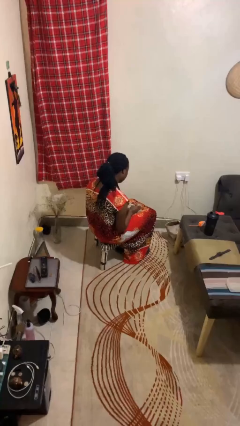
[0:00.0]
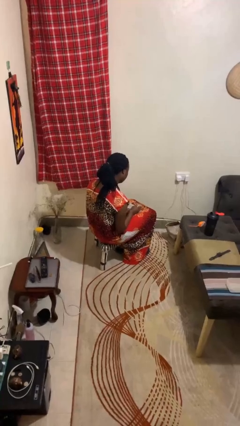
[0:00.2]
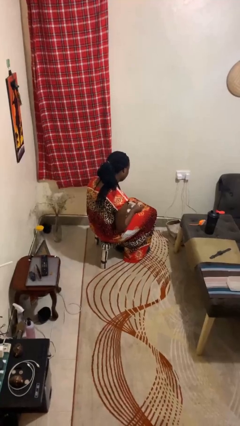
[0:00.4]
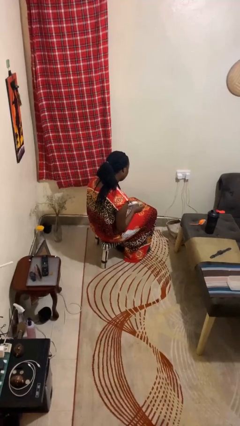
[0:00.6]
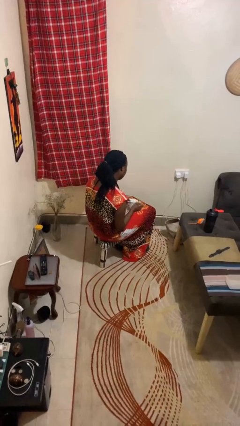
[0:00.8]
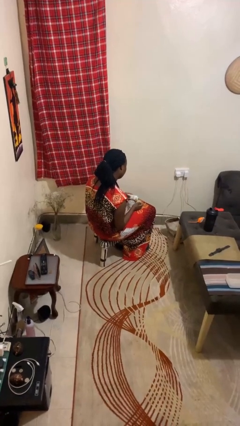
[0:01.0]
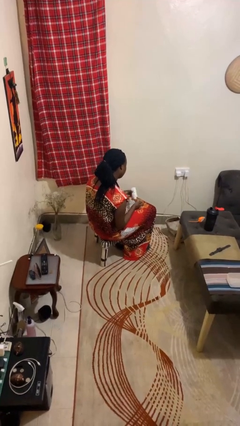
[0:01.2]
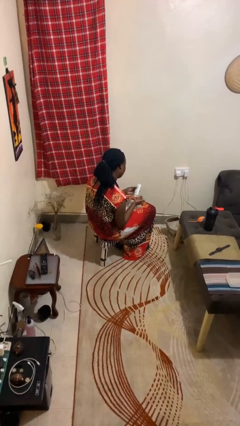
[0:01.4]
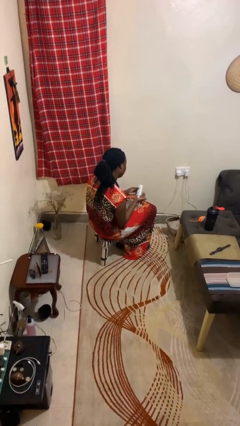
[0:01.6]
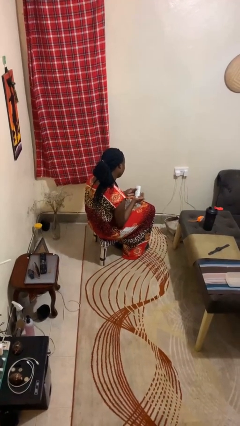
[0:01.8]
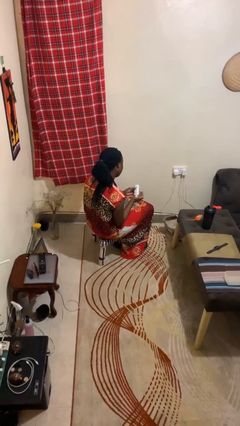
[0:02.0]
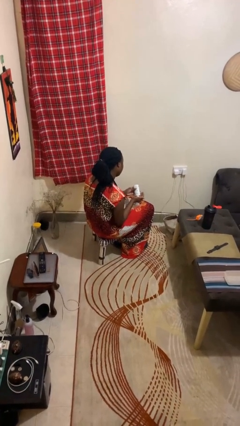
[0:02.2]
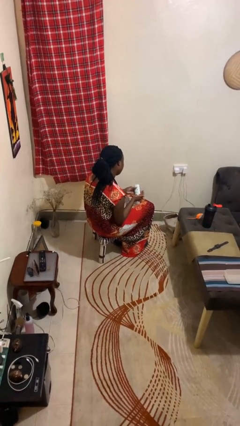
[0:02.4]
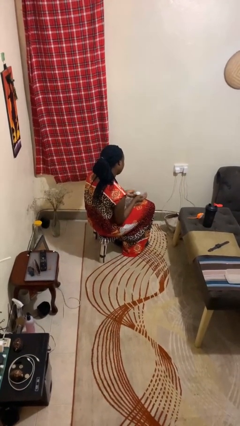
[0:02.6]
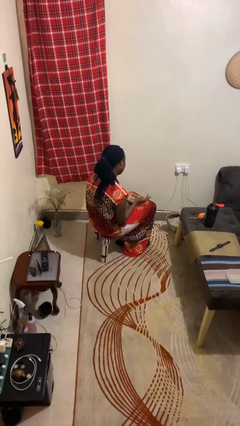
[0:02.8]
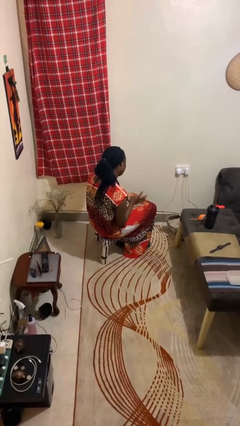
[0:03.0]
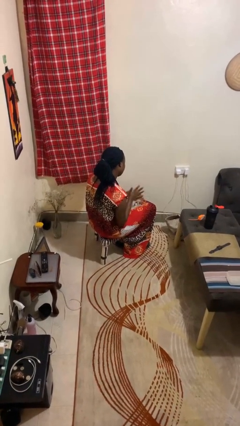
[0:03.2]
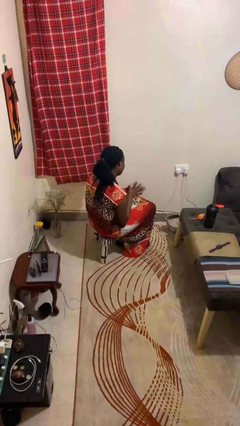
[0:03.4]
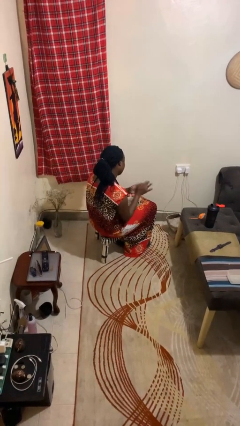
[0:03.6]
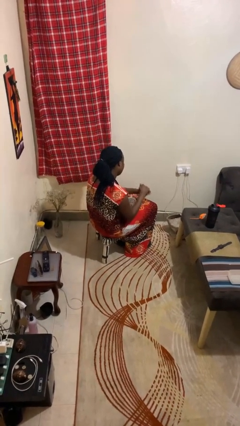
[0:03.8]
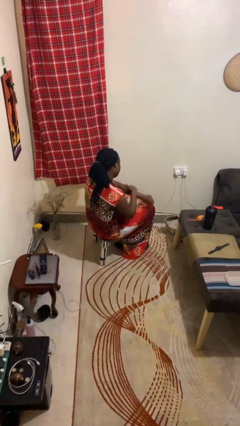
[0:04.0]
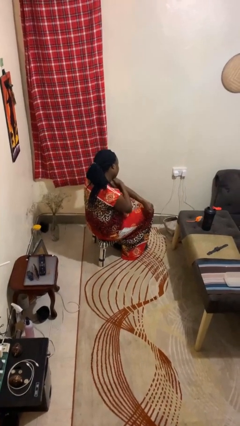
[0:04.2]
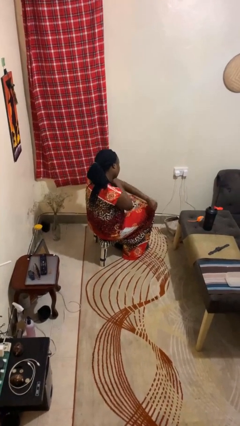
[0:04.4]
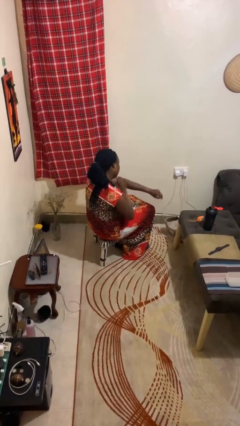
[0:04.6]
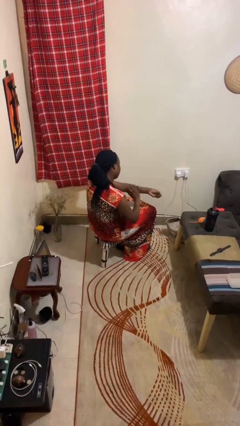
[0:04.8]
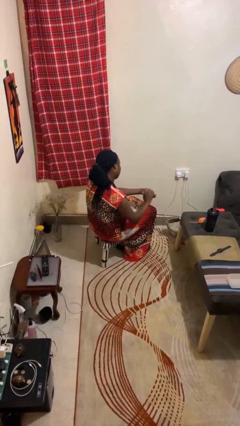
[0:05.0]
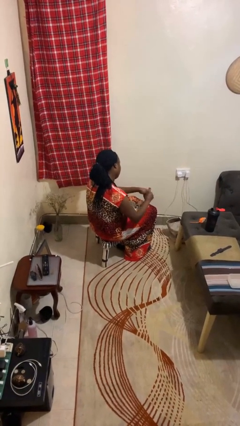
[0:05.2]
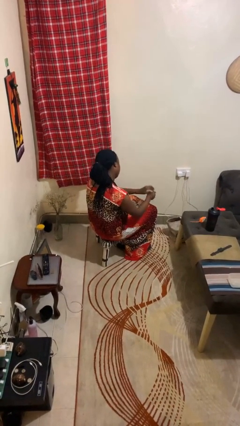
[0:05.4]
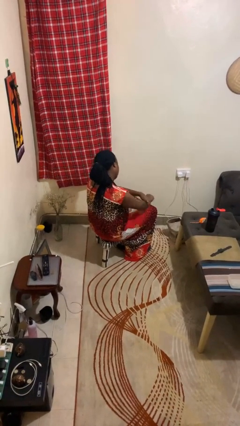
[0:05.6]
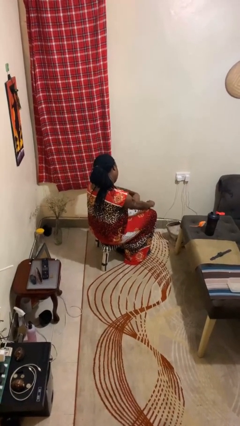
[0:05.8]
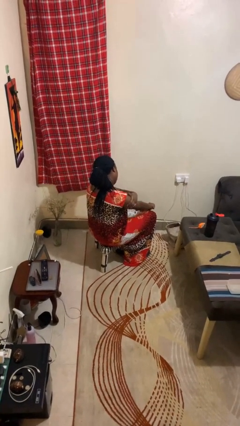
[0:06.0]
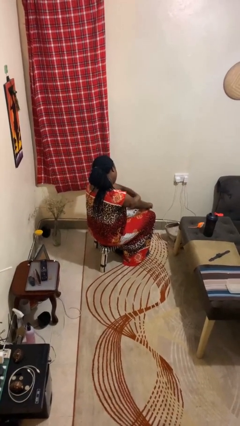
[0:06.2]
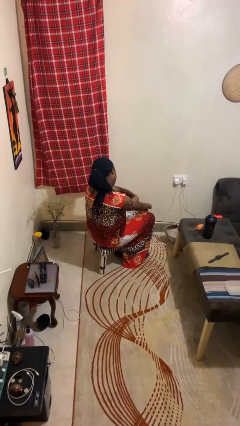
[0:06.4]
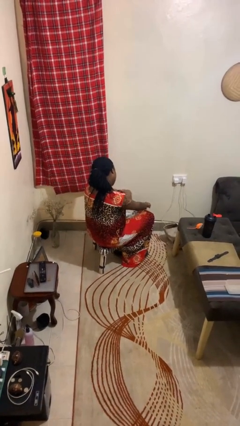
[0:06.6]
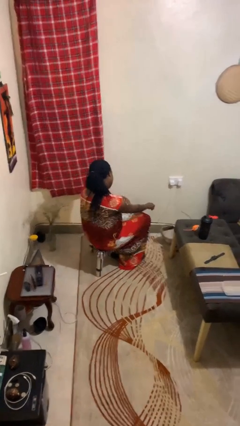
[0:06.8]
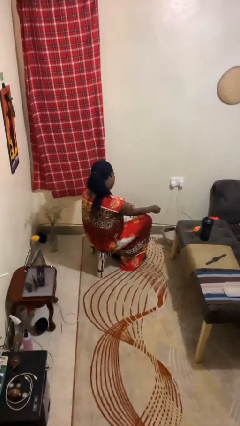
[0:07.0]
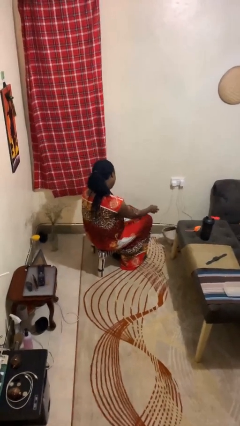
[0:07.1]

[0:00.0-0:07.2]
person applies sunscreen

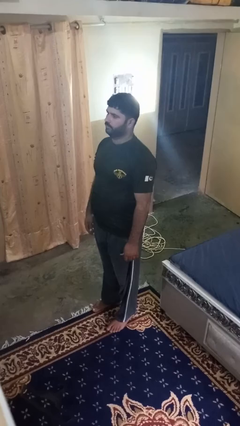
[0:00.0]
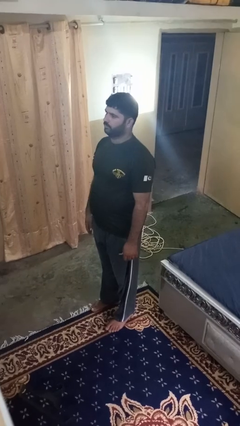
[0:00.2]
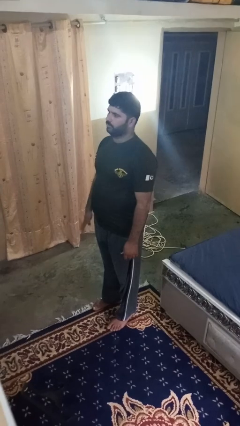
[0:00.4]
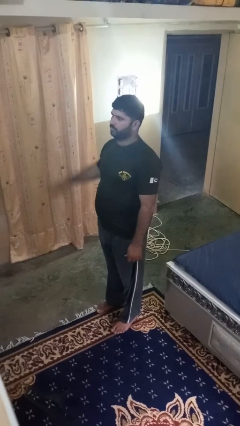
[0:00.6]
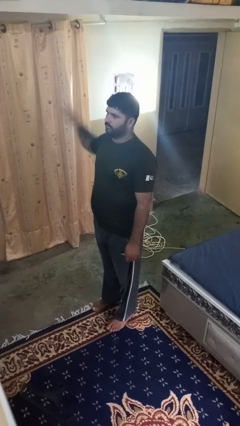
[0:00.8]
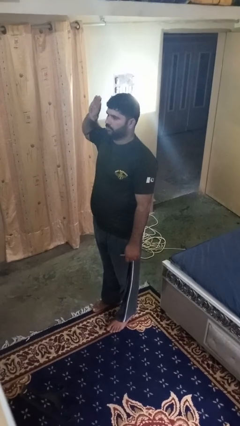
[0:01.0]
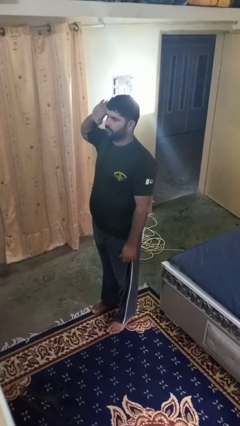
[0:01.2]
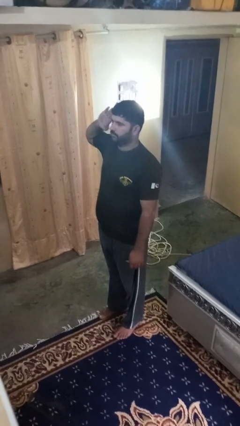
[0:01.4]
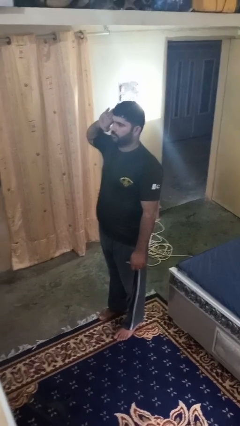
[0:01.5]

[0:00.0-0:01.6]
person salutes

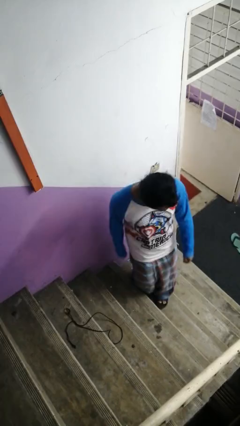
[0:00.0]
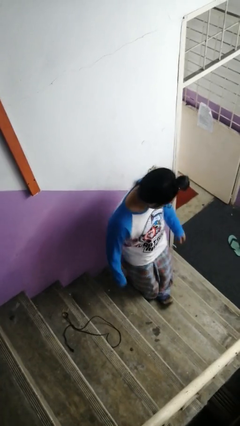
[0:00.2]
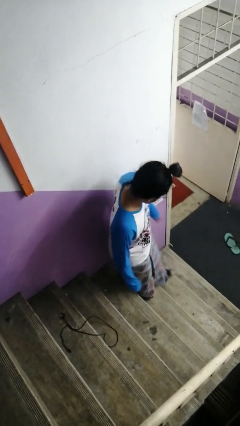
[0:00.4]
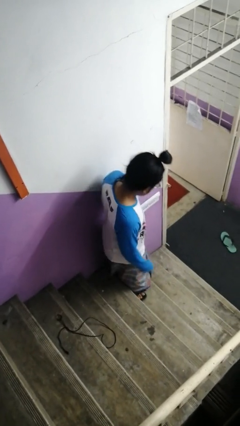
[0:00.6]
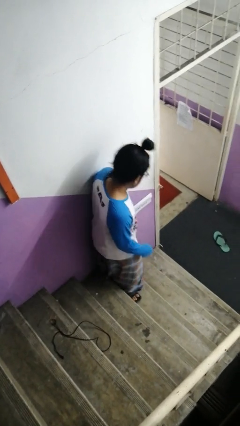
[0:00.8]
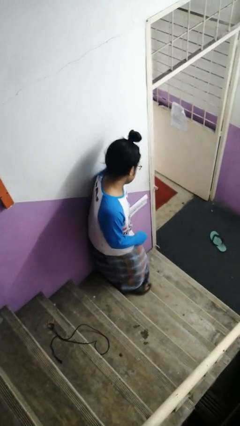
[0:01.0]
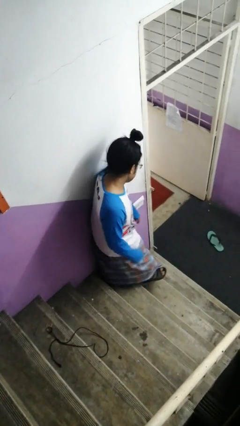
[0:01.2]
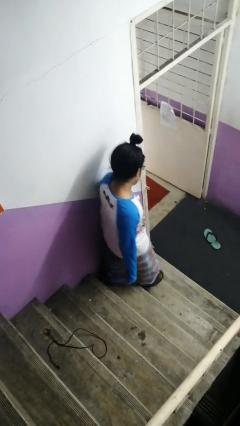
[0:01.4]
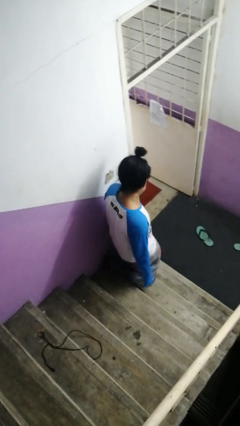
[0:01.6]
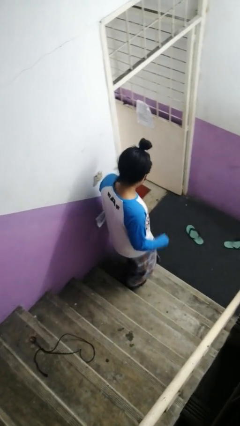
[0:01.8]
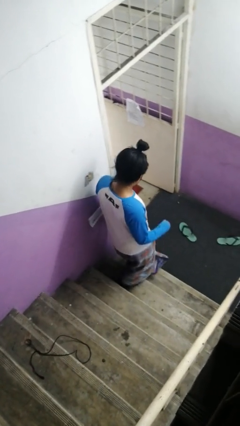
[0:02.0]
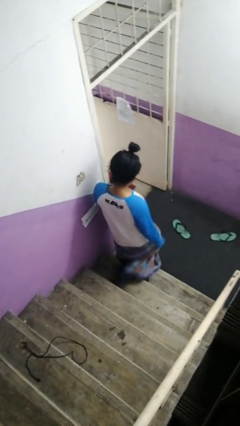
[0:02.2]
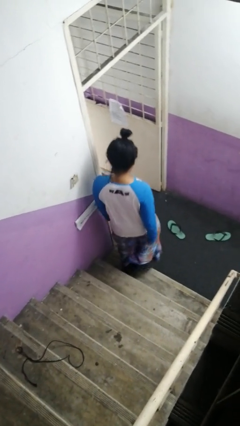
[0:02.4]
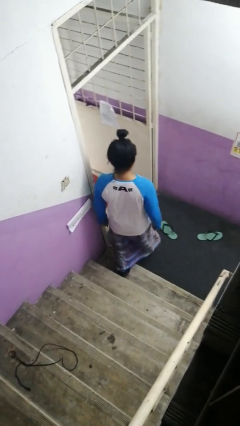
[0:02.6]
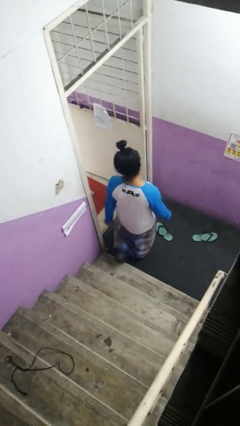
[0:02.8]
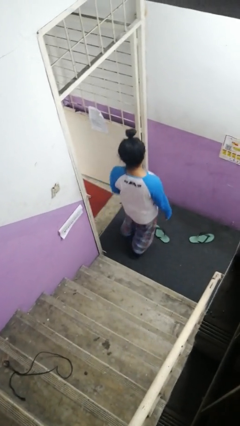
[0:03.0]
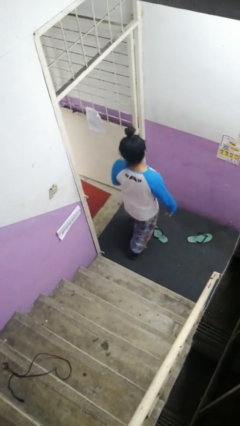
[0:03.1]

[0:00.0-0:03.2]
person climbs down stairs

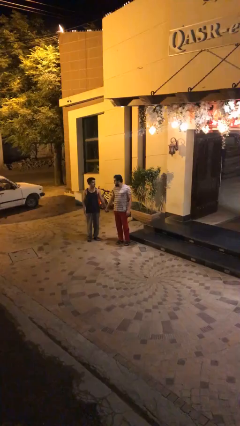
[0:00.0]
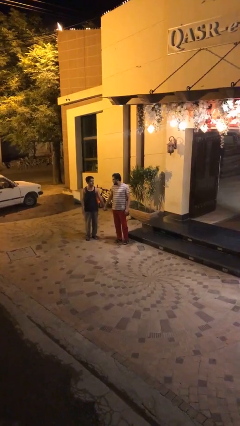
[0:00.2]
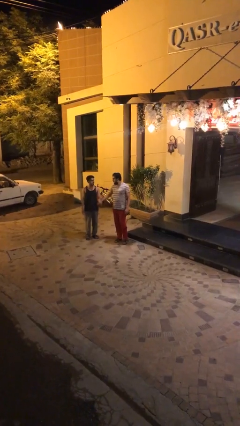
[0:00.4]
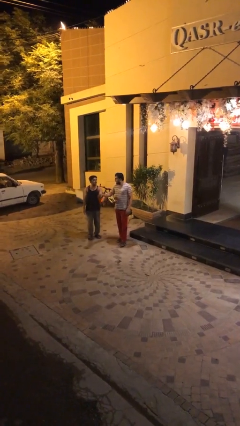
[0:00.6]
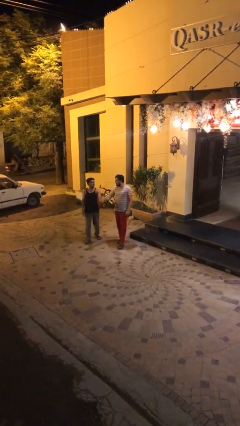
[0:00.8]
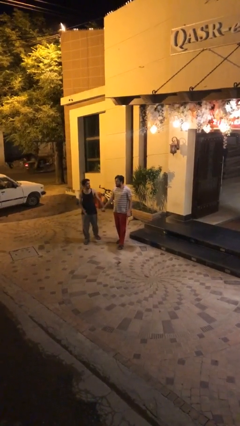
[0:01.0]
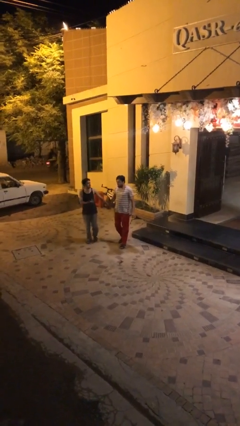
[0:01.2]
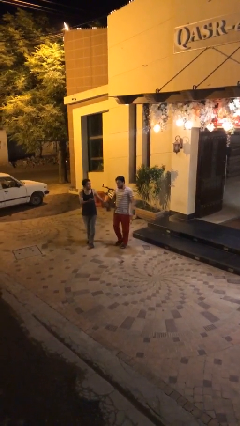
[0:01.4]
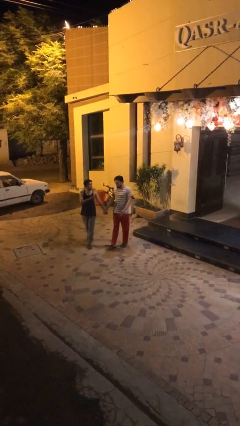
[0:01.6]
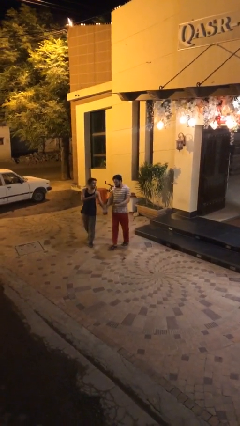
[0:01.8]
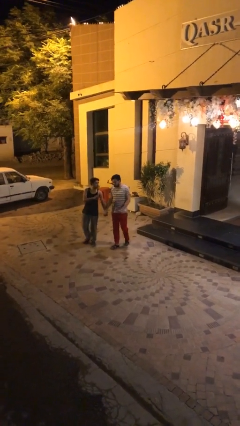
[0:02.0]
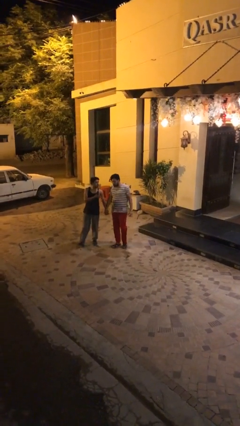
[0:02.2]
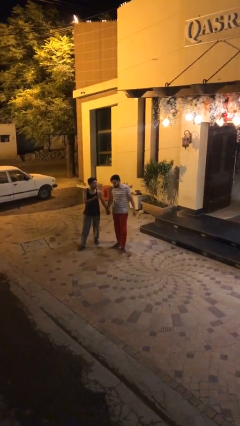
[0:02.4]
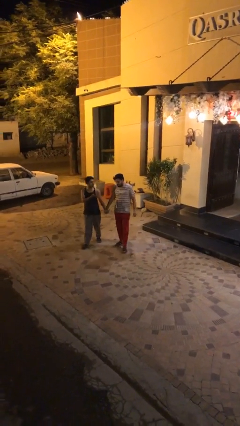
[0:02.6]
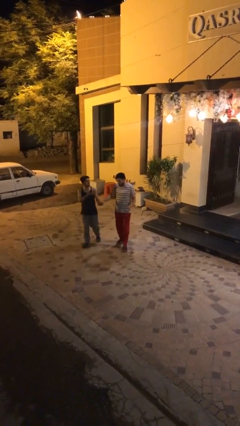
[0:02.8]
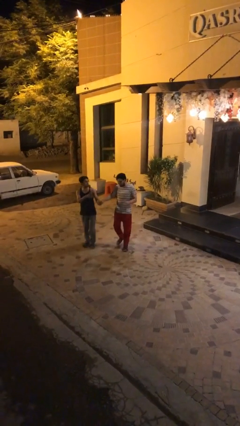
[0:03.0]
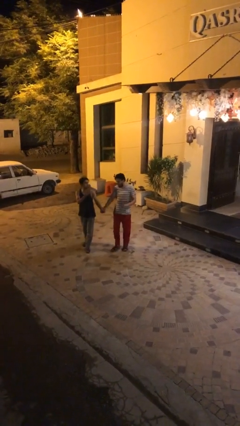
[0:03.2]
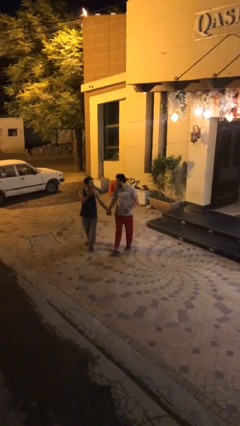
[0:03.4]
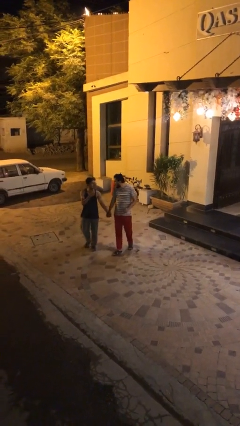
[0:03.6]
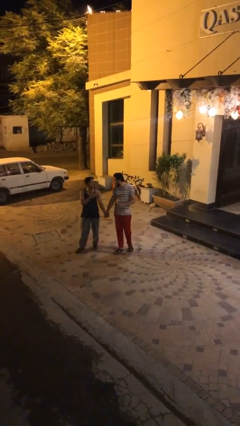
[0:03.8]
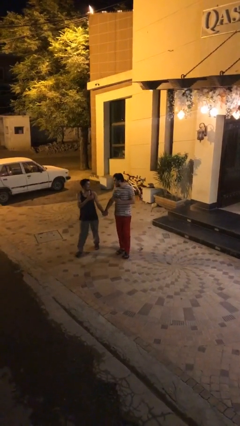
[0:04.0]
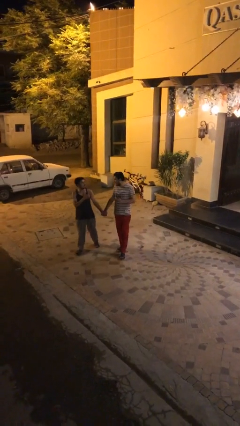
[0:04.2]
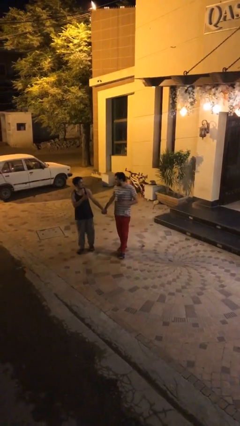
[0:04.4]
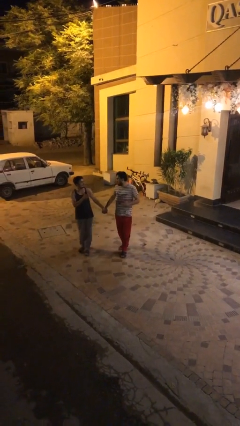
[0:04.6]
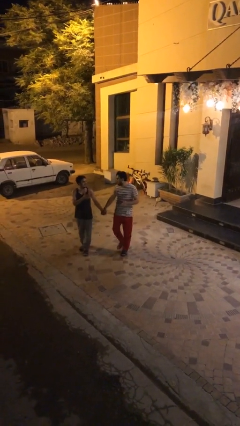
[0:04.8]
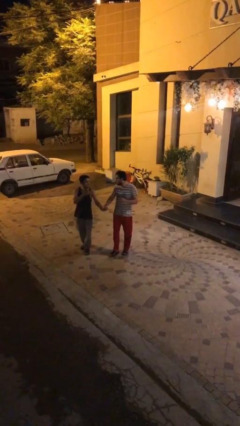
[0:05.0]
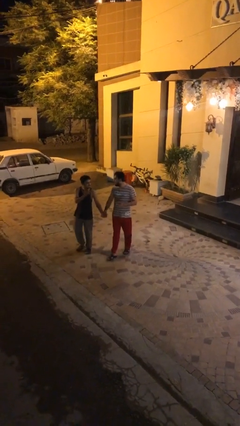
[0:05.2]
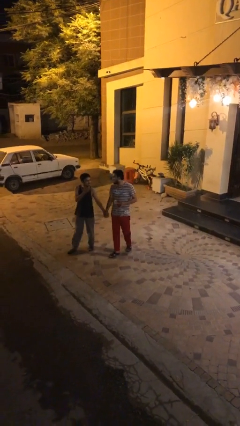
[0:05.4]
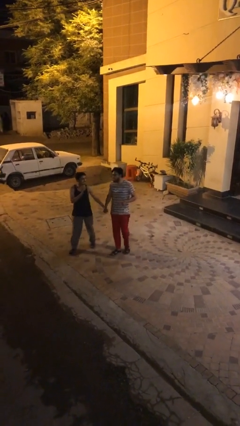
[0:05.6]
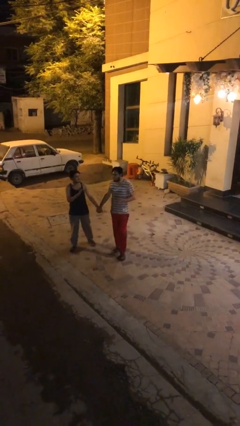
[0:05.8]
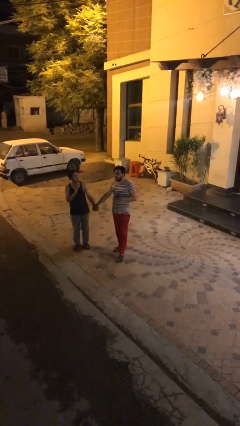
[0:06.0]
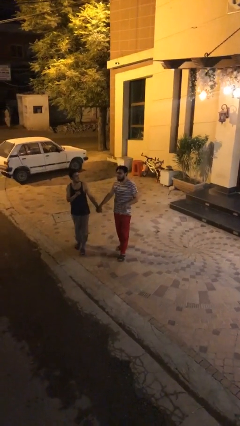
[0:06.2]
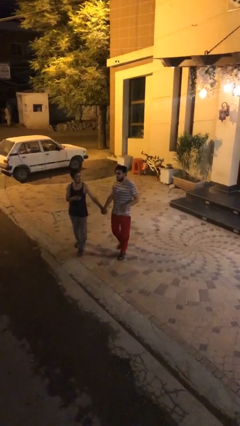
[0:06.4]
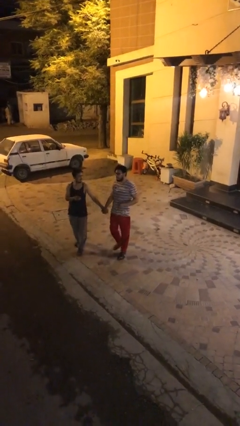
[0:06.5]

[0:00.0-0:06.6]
person holds hand
